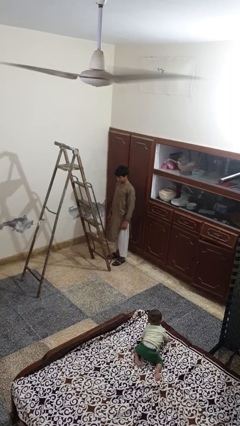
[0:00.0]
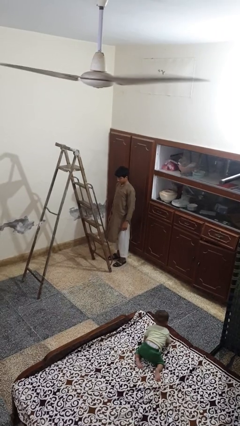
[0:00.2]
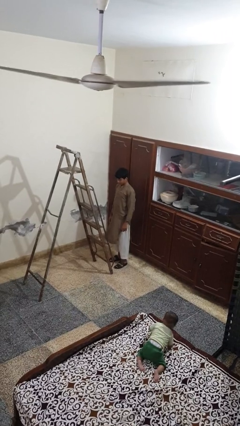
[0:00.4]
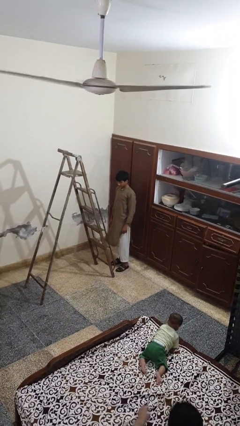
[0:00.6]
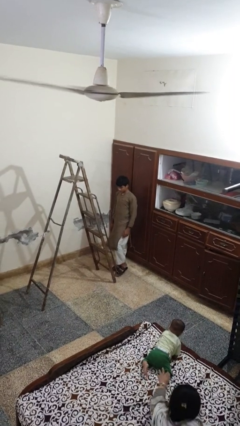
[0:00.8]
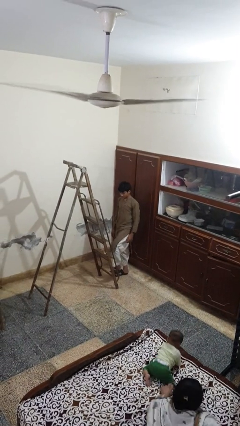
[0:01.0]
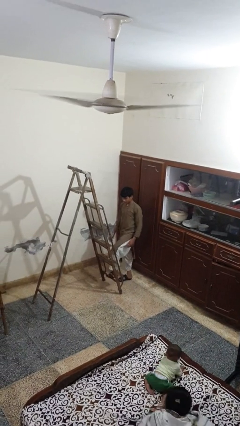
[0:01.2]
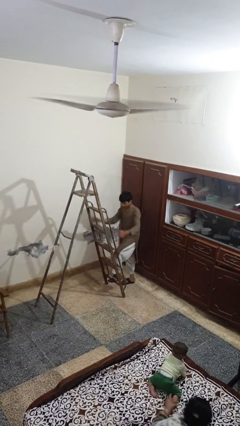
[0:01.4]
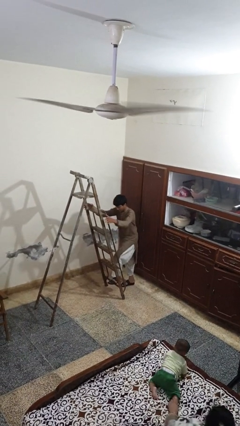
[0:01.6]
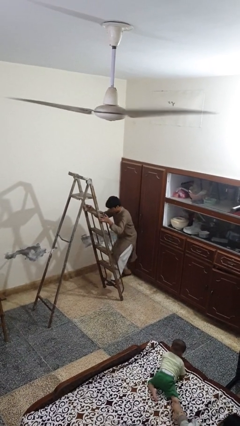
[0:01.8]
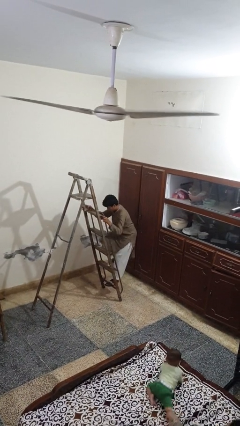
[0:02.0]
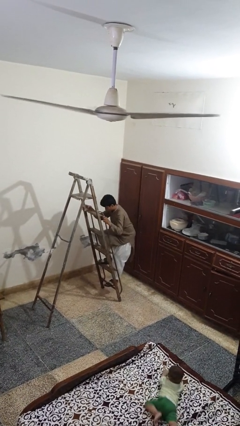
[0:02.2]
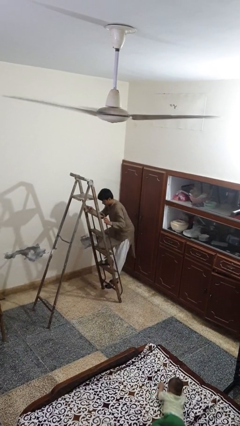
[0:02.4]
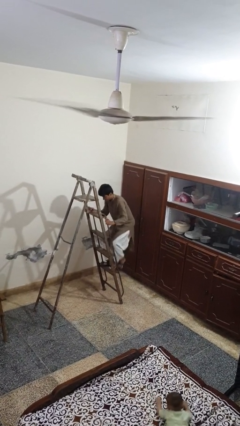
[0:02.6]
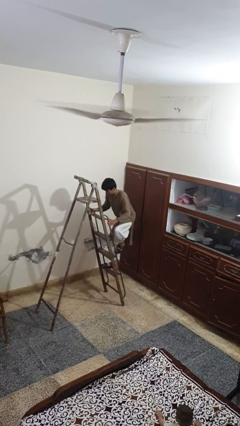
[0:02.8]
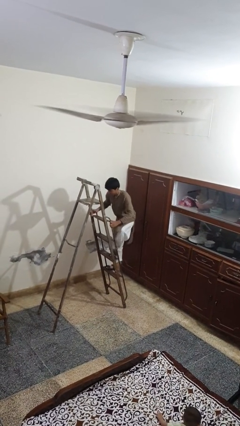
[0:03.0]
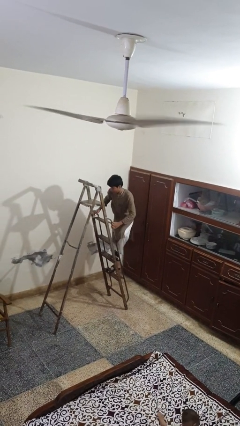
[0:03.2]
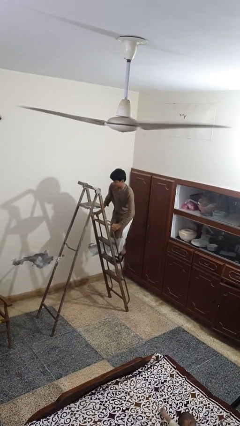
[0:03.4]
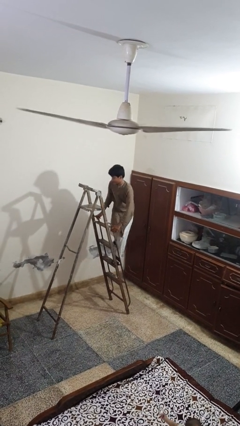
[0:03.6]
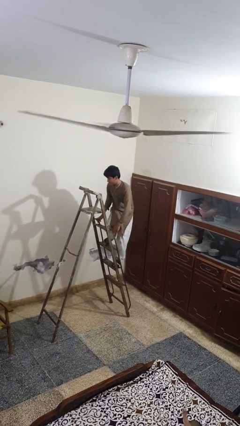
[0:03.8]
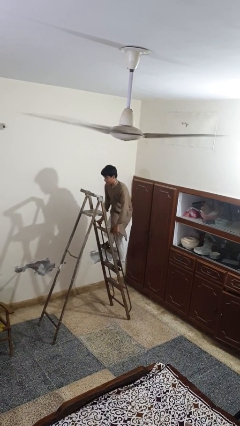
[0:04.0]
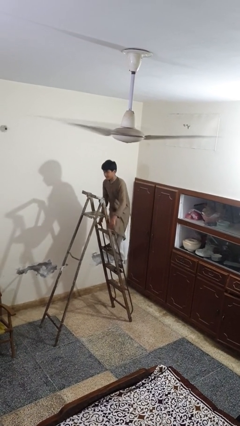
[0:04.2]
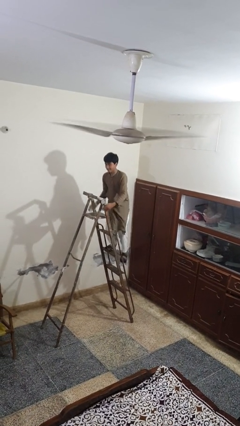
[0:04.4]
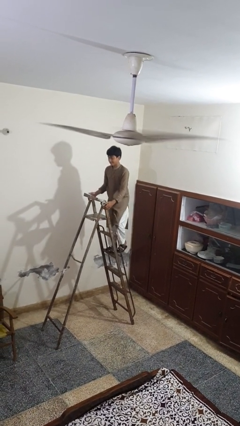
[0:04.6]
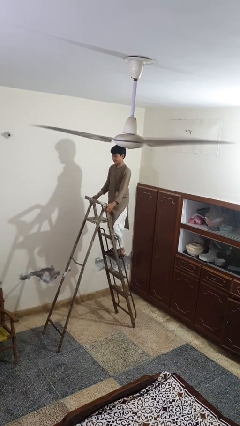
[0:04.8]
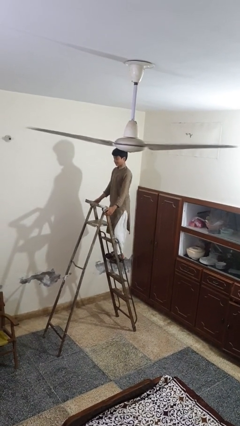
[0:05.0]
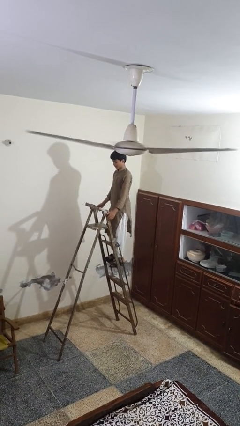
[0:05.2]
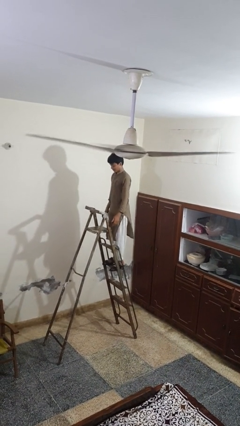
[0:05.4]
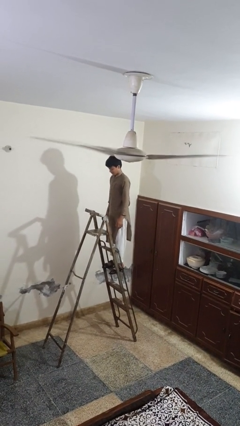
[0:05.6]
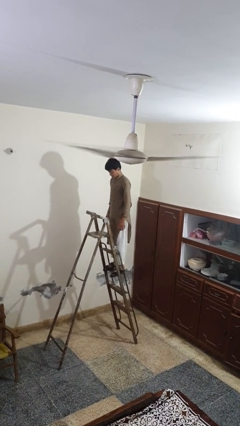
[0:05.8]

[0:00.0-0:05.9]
person climbs up ladder

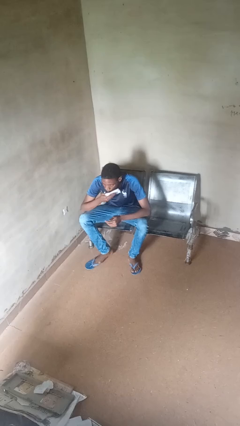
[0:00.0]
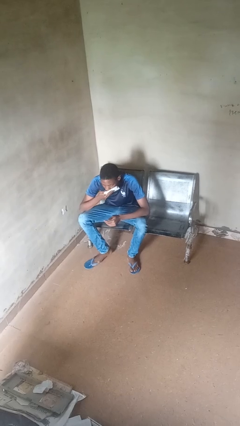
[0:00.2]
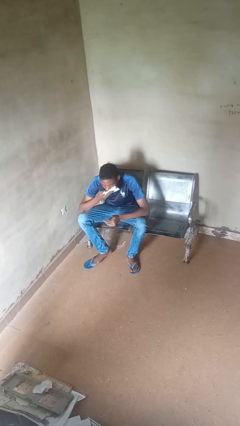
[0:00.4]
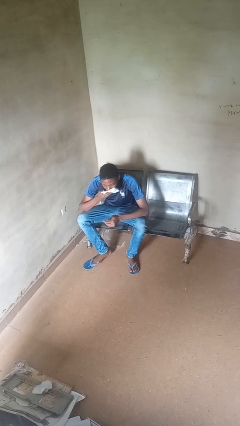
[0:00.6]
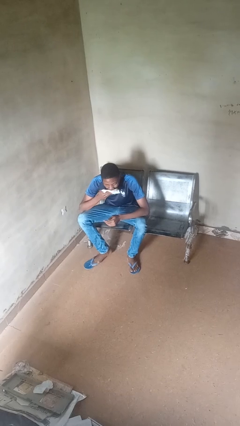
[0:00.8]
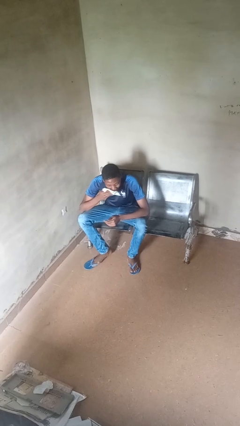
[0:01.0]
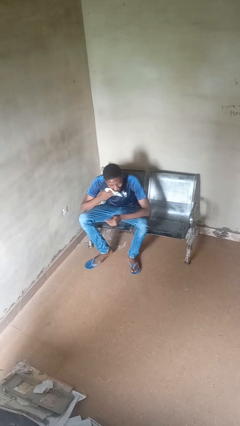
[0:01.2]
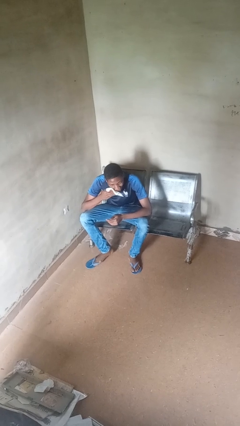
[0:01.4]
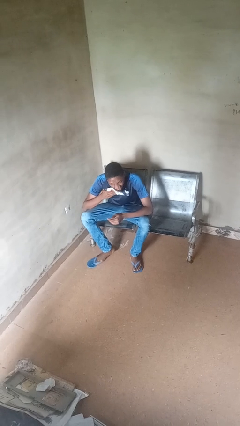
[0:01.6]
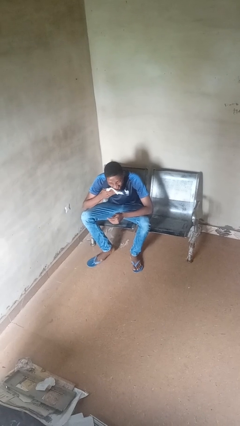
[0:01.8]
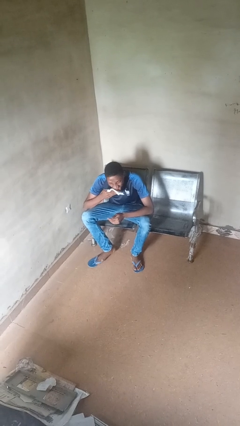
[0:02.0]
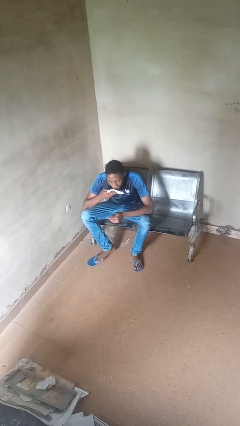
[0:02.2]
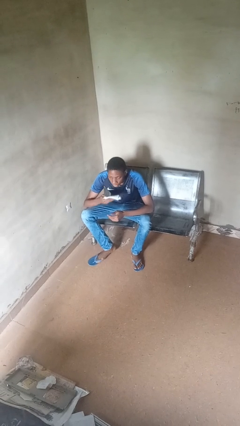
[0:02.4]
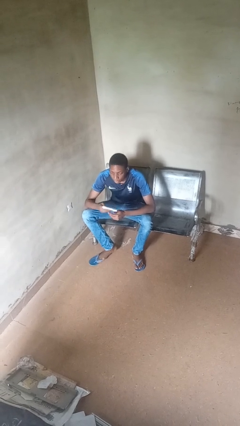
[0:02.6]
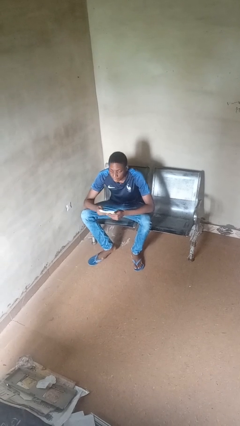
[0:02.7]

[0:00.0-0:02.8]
person wipes mouth with napkin

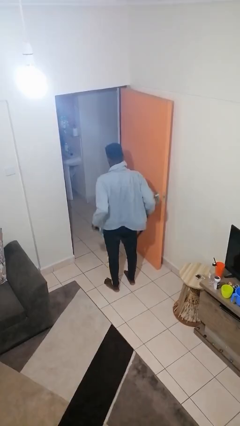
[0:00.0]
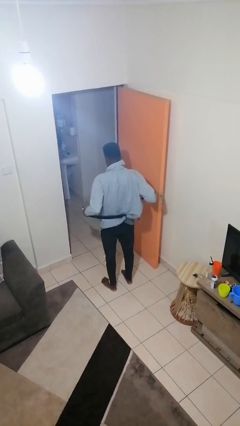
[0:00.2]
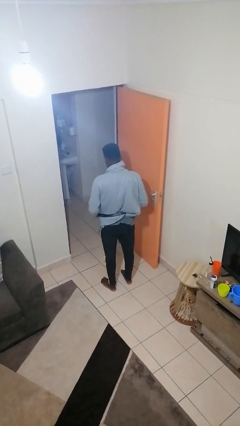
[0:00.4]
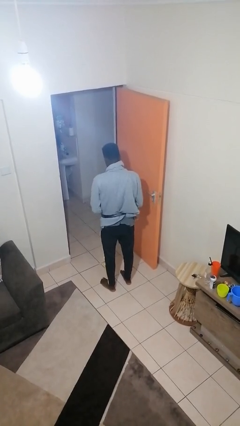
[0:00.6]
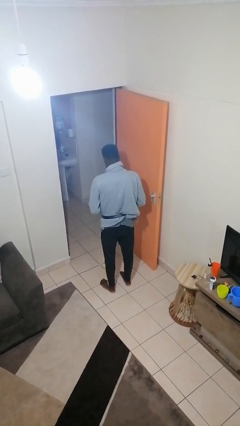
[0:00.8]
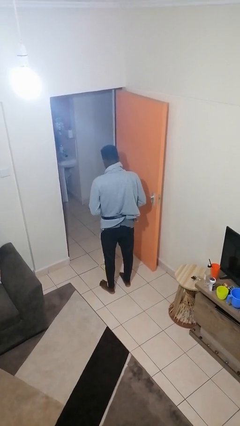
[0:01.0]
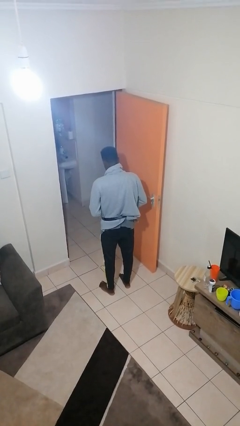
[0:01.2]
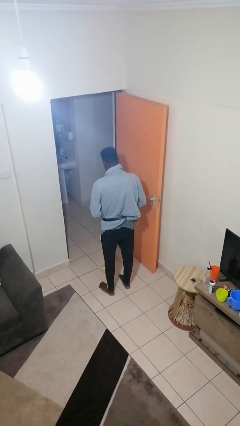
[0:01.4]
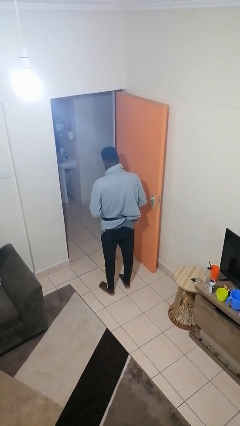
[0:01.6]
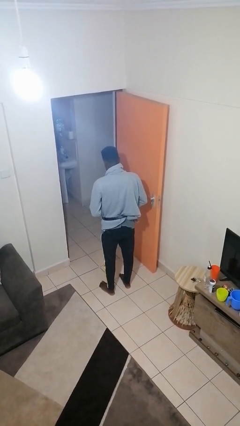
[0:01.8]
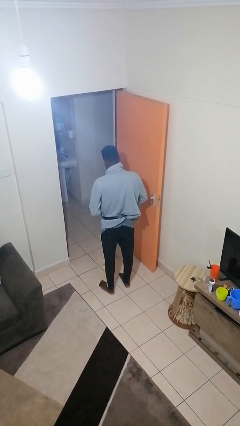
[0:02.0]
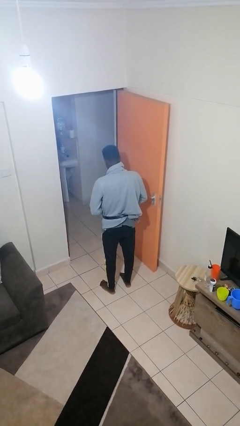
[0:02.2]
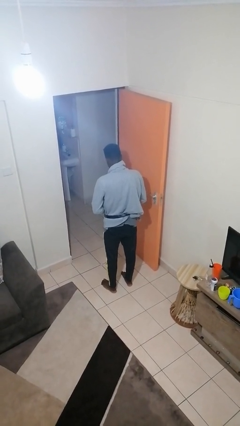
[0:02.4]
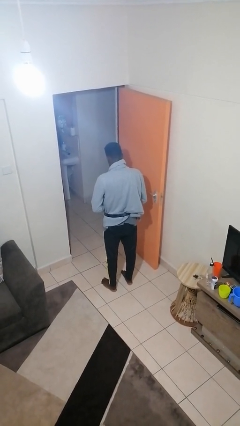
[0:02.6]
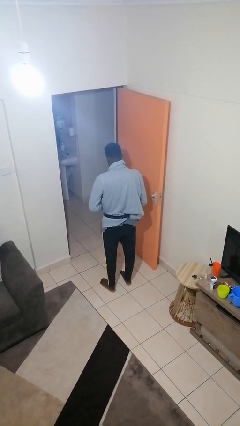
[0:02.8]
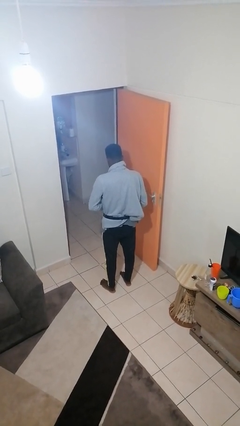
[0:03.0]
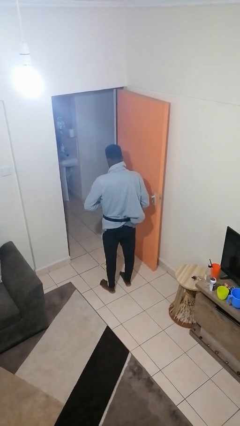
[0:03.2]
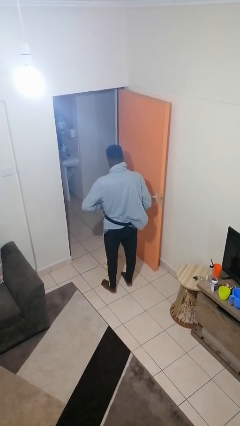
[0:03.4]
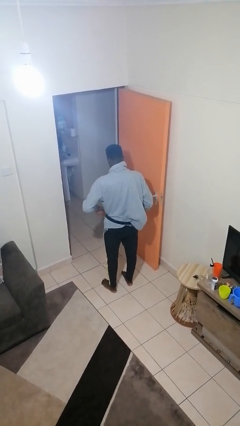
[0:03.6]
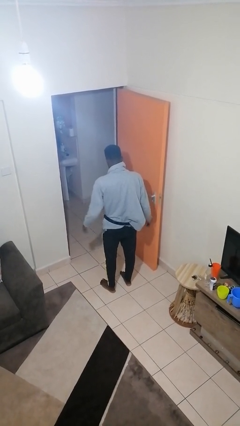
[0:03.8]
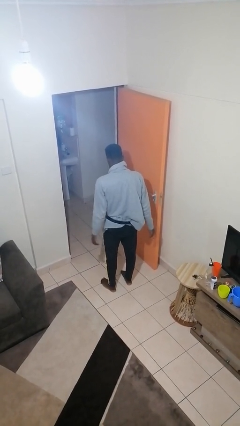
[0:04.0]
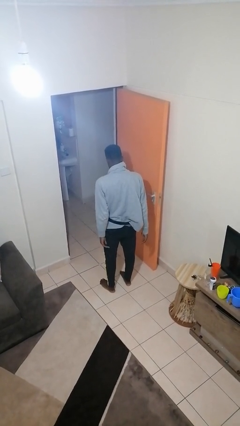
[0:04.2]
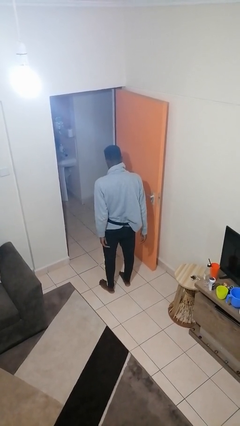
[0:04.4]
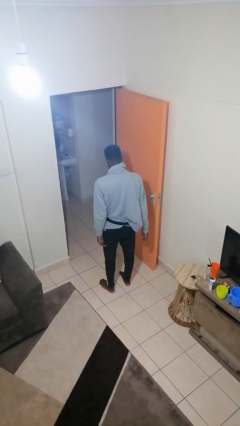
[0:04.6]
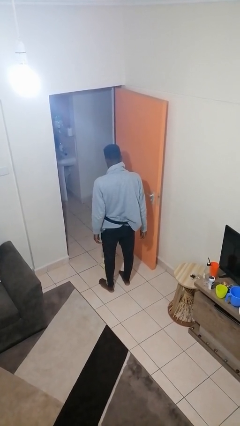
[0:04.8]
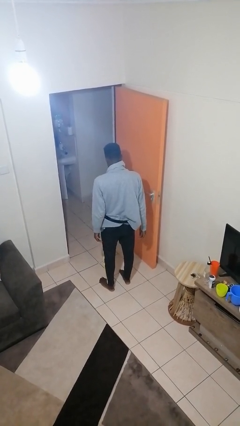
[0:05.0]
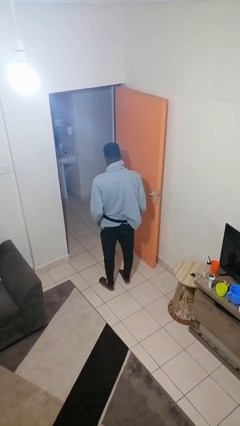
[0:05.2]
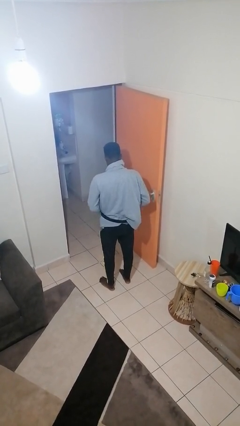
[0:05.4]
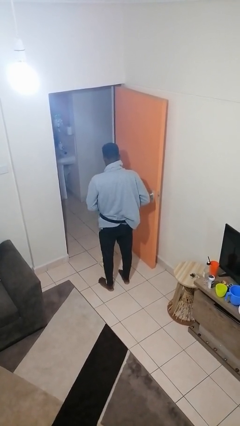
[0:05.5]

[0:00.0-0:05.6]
person puts on belt

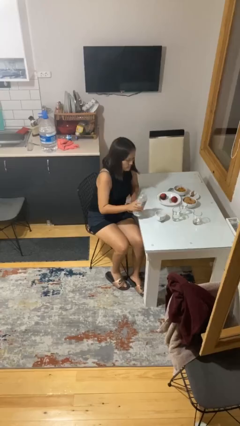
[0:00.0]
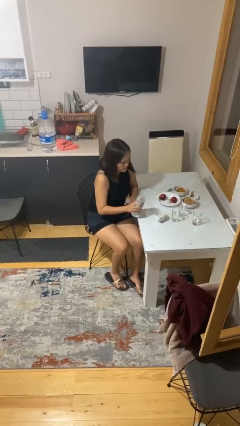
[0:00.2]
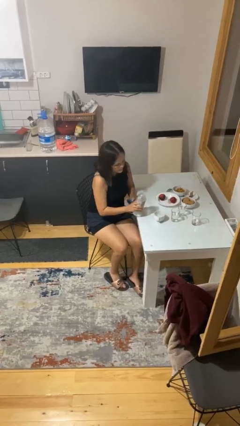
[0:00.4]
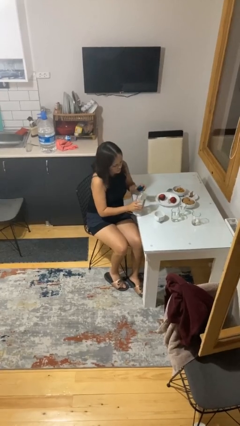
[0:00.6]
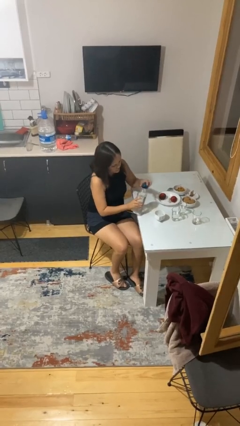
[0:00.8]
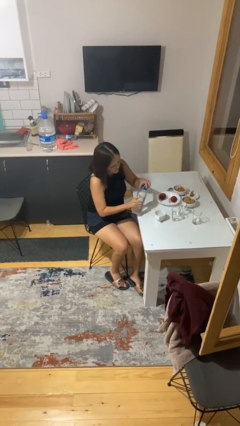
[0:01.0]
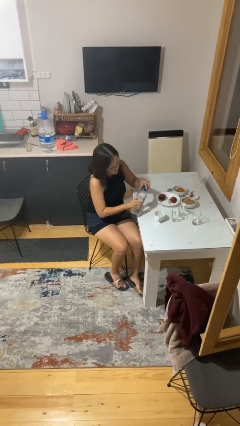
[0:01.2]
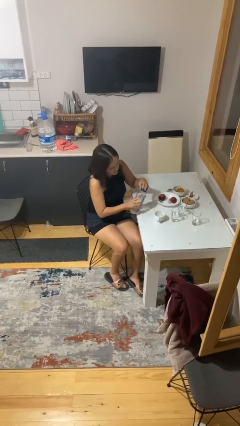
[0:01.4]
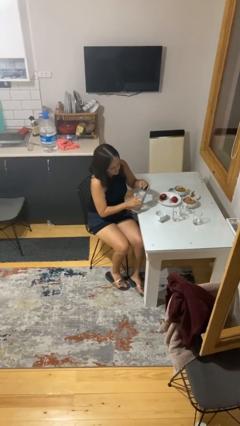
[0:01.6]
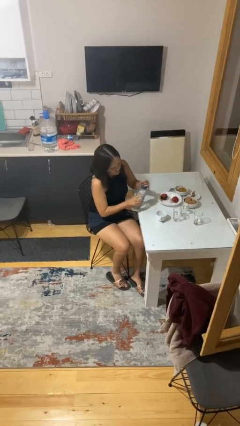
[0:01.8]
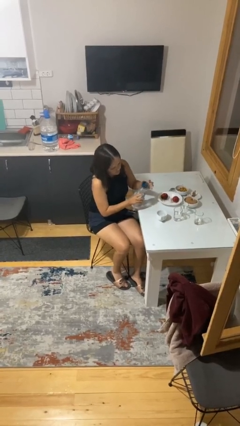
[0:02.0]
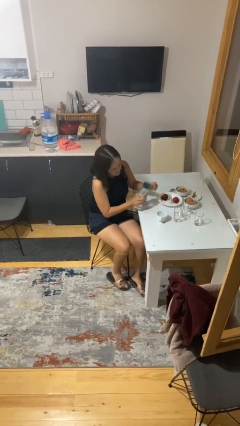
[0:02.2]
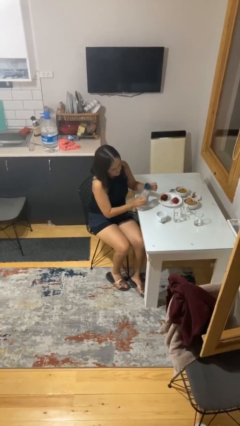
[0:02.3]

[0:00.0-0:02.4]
person screws lid to bottle

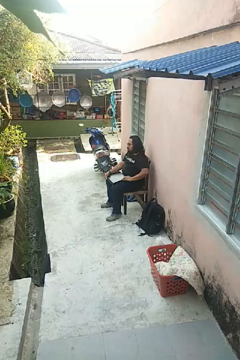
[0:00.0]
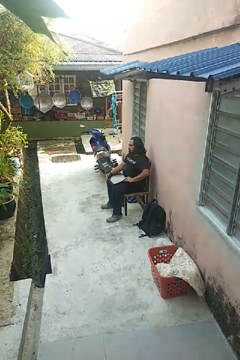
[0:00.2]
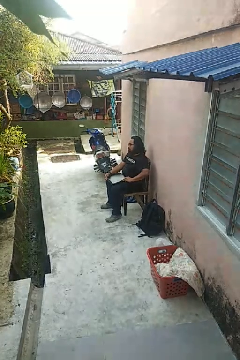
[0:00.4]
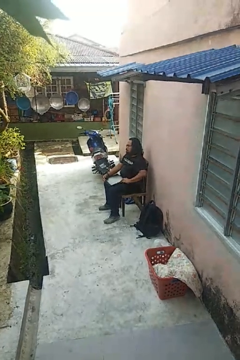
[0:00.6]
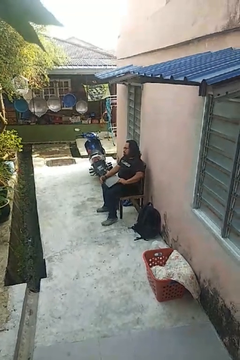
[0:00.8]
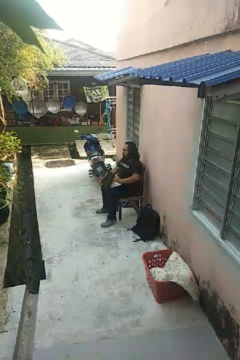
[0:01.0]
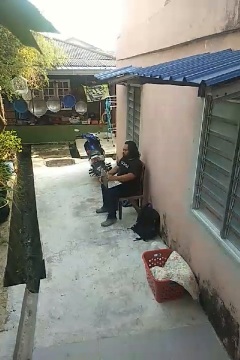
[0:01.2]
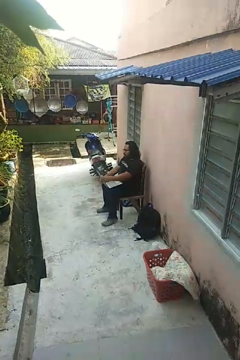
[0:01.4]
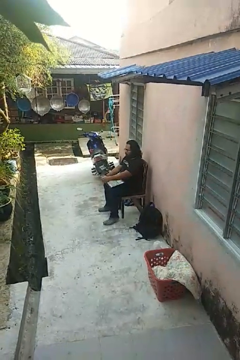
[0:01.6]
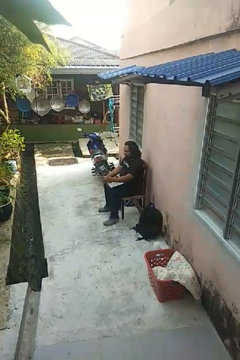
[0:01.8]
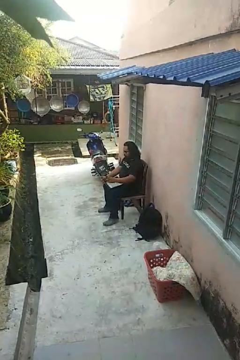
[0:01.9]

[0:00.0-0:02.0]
person opens laptop
